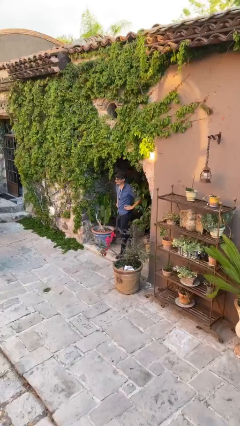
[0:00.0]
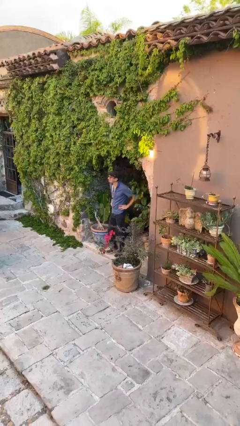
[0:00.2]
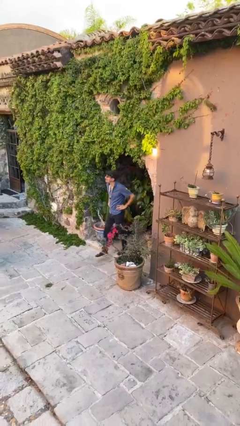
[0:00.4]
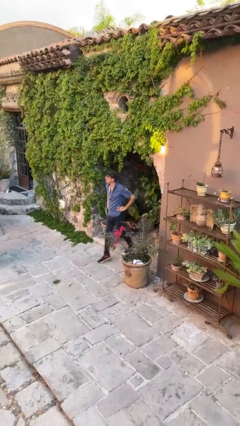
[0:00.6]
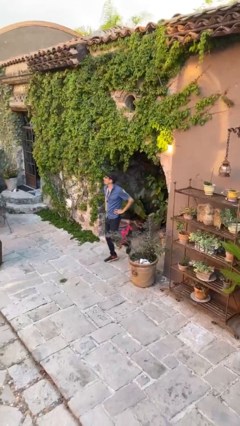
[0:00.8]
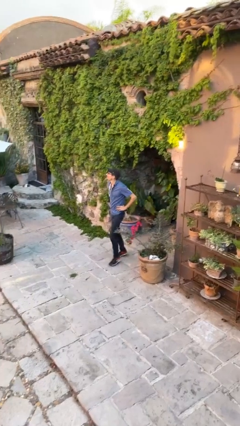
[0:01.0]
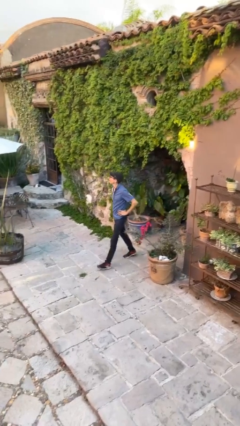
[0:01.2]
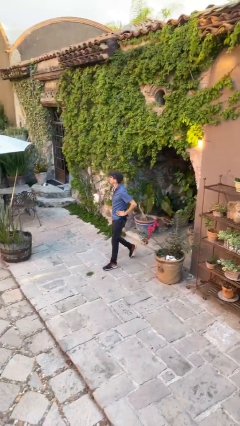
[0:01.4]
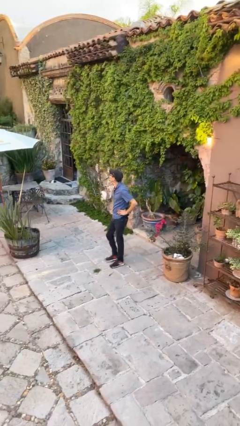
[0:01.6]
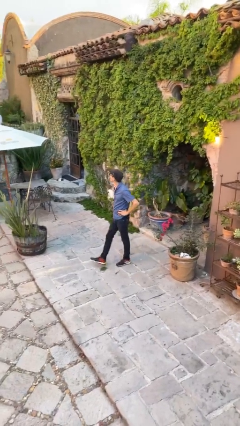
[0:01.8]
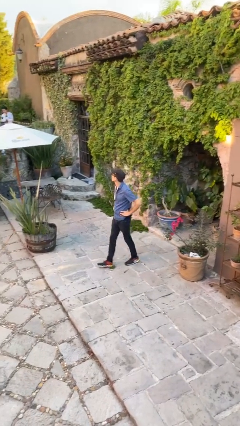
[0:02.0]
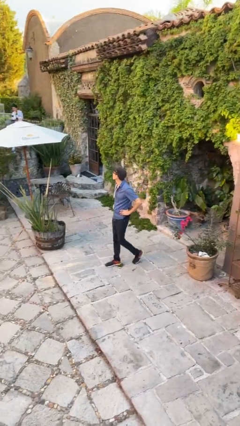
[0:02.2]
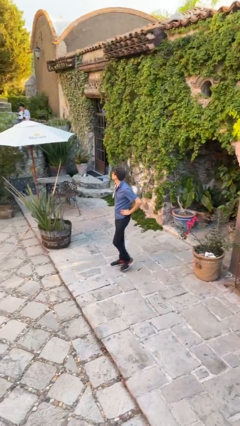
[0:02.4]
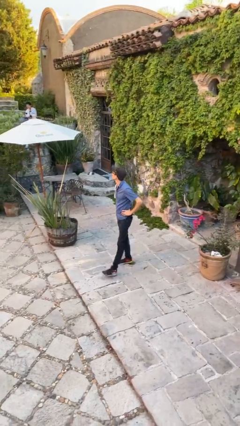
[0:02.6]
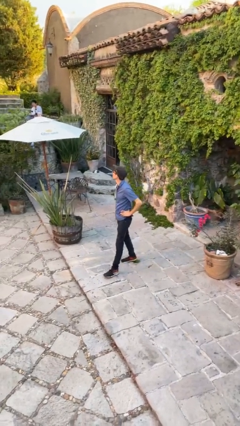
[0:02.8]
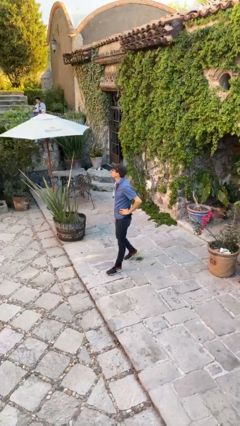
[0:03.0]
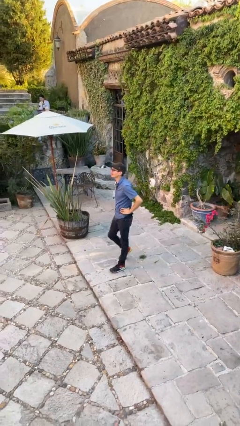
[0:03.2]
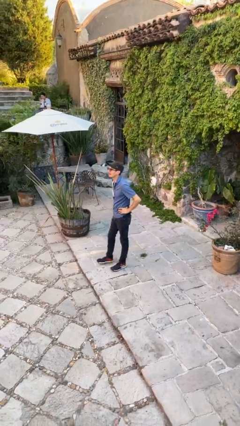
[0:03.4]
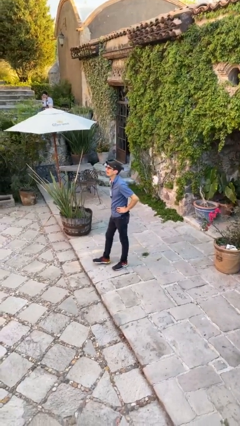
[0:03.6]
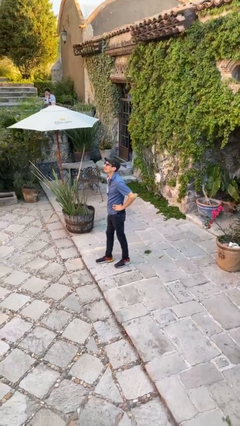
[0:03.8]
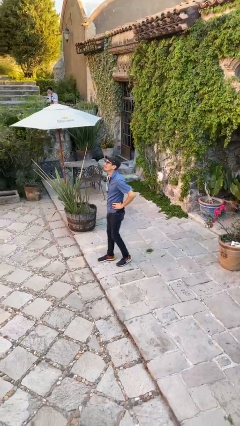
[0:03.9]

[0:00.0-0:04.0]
person enters scene through structure

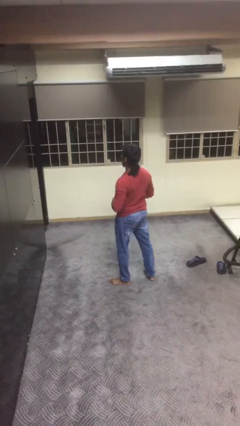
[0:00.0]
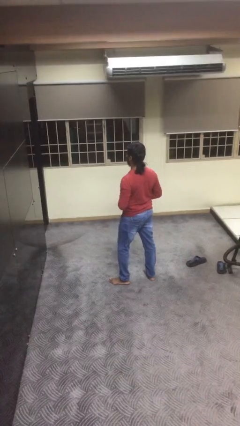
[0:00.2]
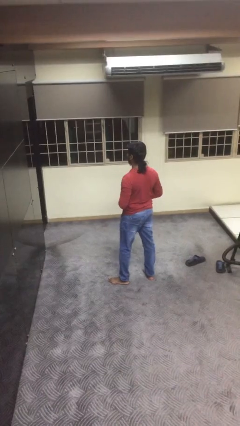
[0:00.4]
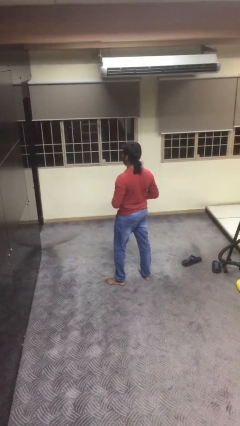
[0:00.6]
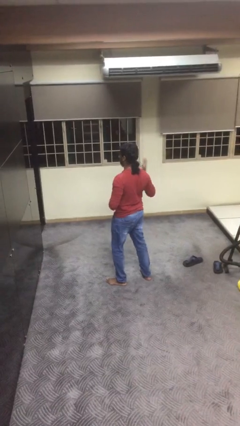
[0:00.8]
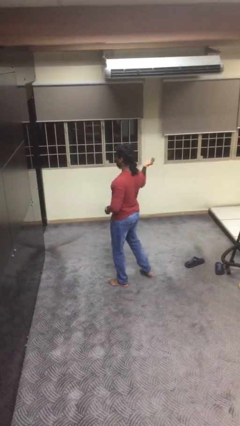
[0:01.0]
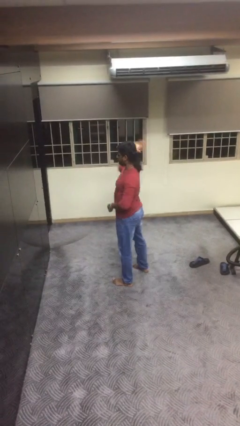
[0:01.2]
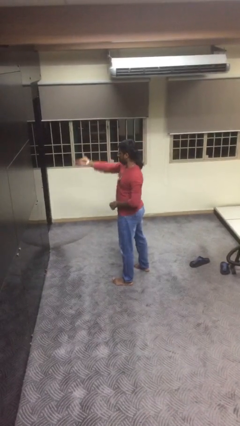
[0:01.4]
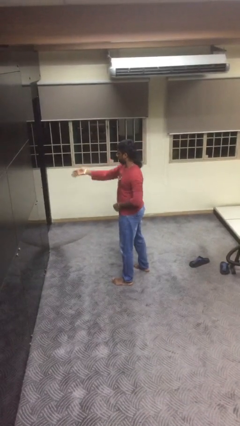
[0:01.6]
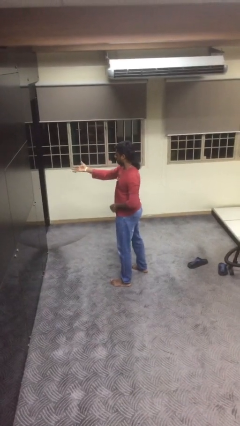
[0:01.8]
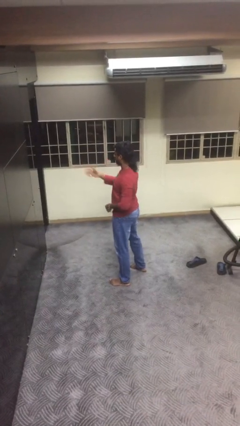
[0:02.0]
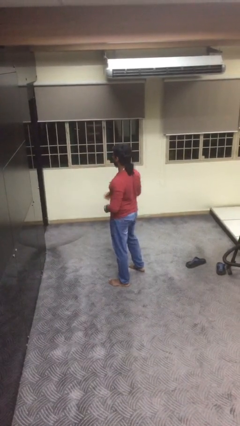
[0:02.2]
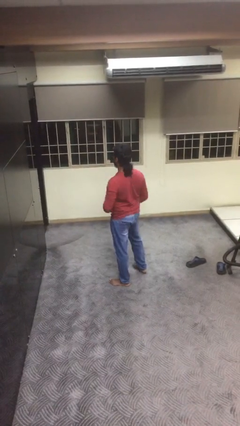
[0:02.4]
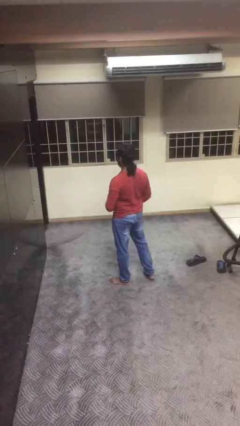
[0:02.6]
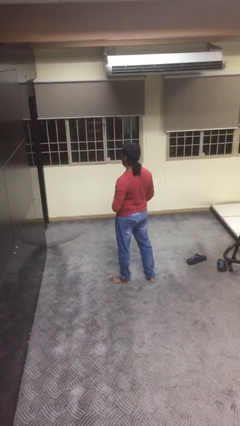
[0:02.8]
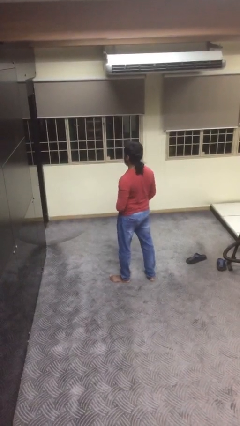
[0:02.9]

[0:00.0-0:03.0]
person karate chop

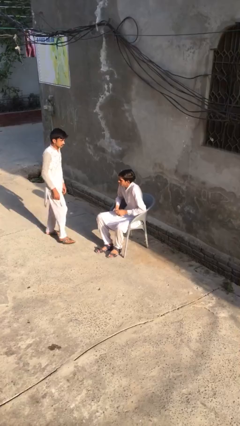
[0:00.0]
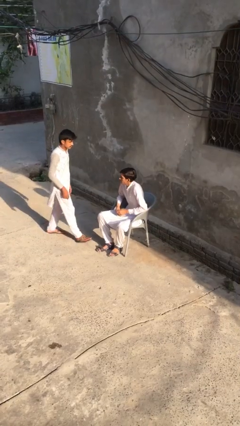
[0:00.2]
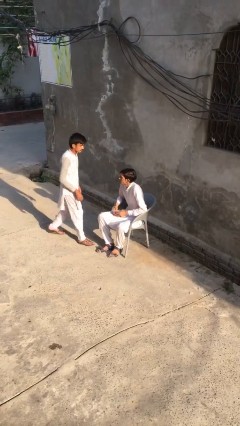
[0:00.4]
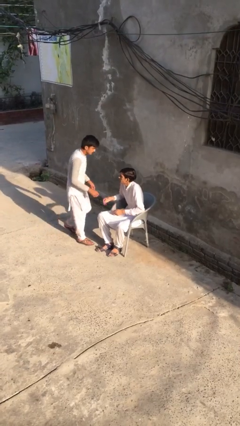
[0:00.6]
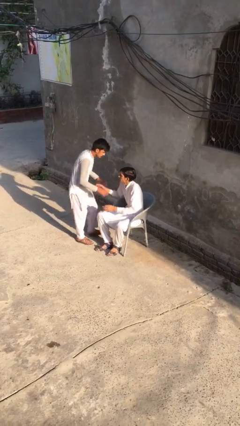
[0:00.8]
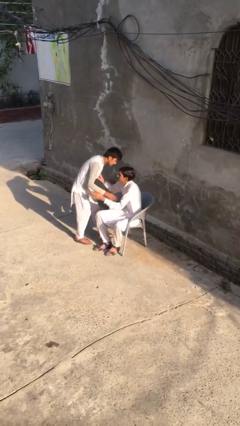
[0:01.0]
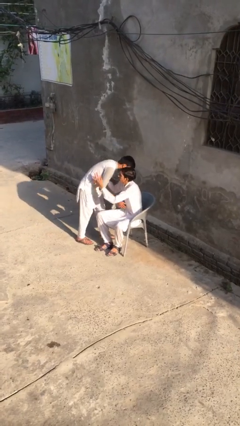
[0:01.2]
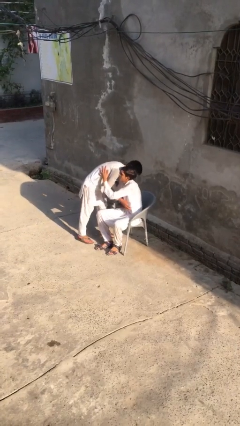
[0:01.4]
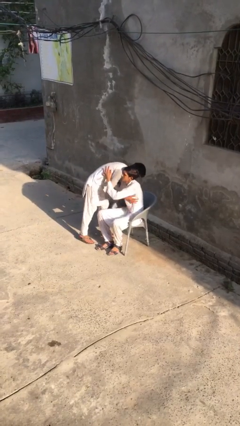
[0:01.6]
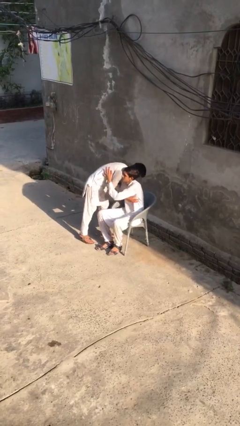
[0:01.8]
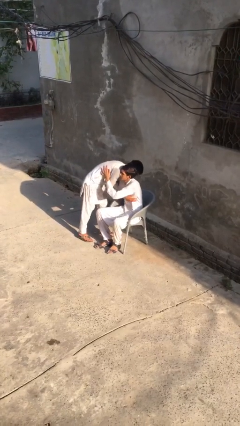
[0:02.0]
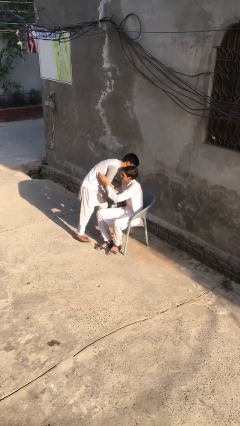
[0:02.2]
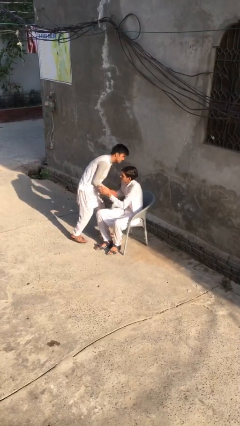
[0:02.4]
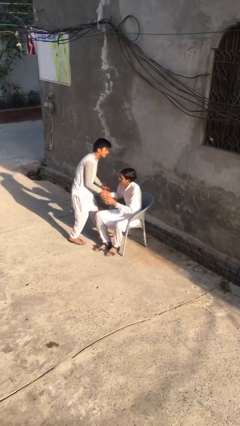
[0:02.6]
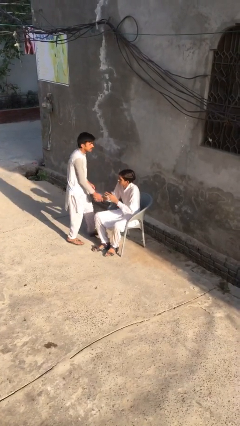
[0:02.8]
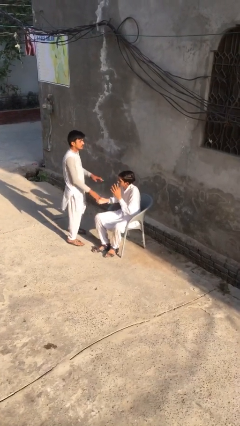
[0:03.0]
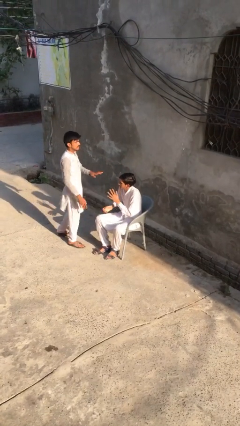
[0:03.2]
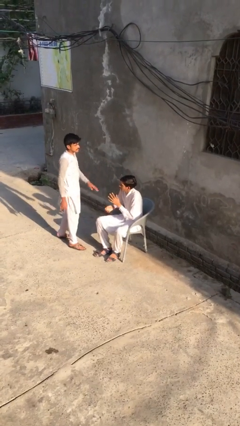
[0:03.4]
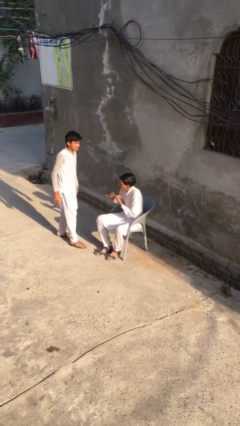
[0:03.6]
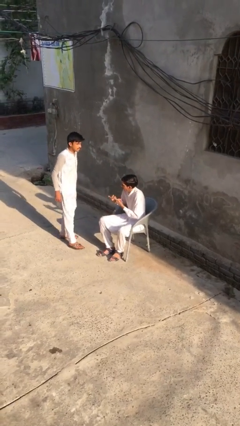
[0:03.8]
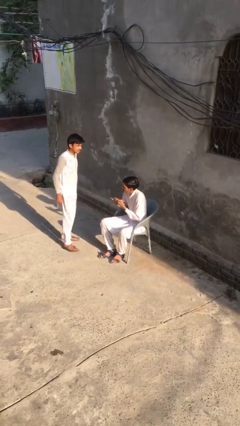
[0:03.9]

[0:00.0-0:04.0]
person embraces person

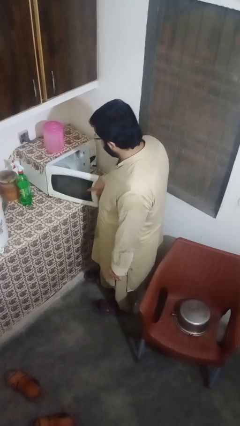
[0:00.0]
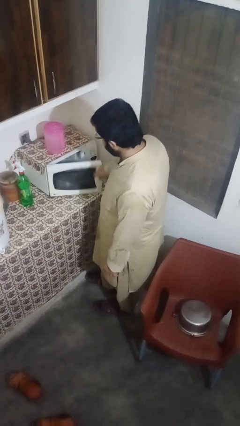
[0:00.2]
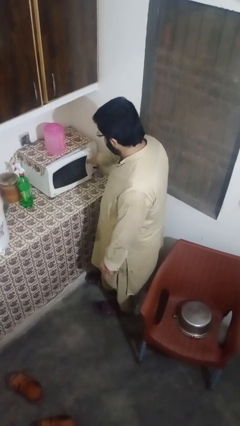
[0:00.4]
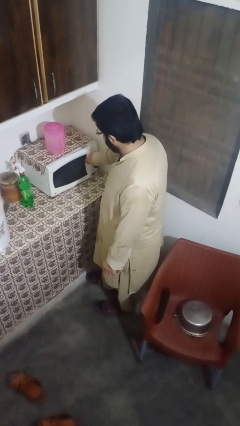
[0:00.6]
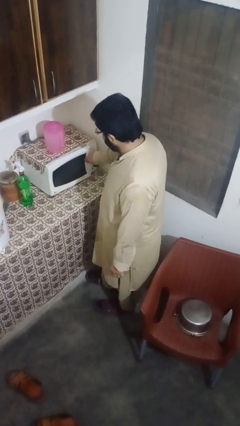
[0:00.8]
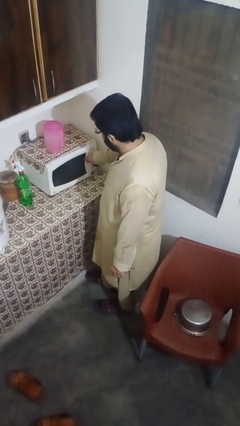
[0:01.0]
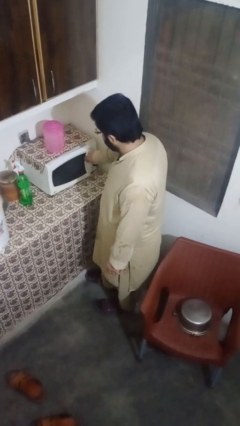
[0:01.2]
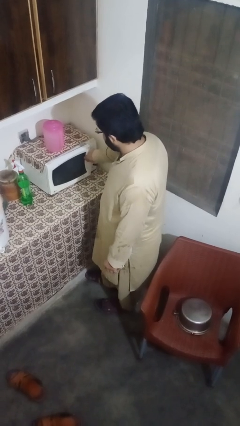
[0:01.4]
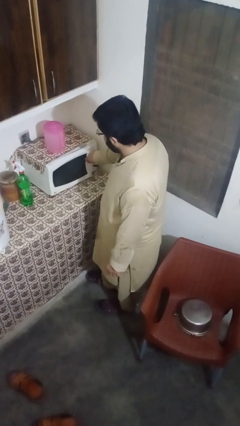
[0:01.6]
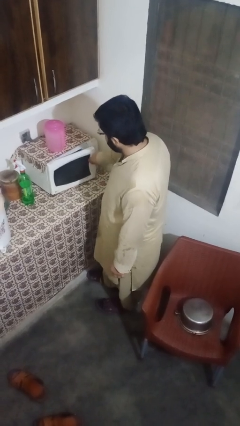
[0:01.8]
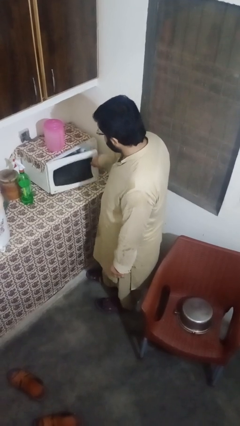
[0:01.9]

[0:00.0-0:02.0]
person closes microwave

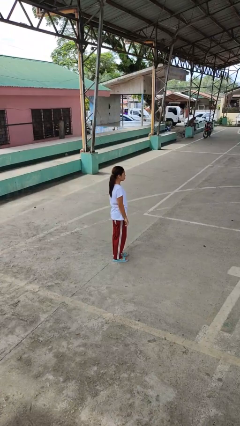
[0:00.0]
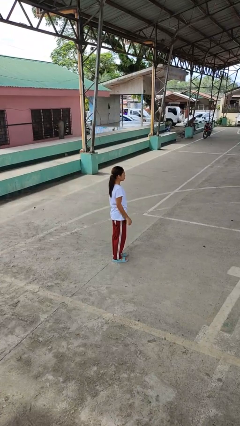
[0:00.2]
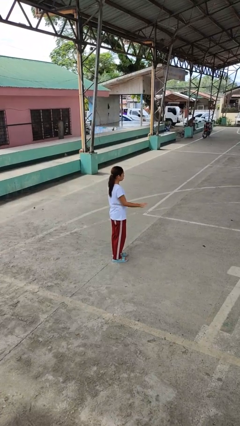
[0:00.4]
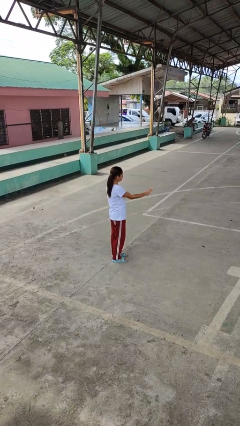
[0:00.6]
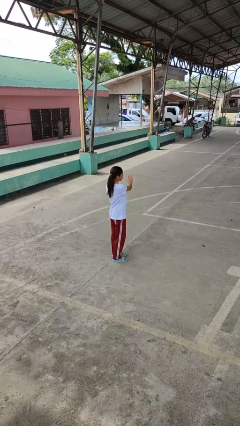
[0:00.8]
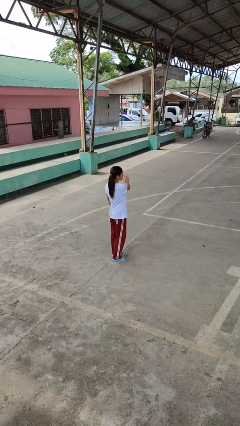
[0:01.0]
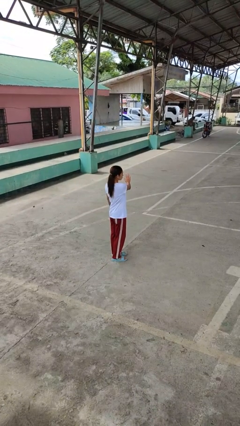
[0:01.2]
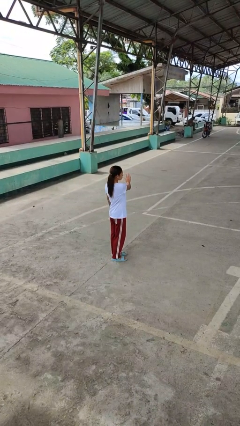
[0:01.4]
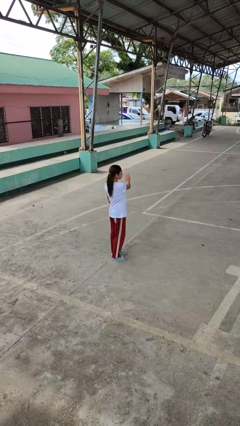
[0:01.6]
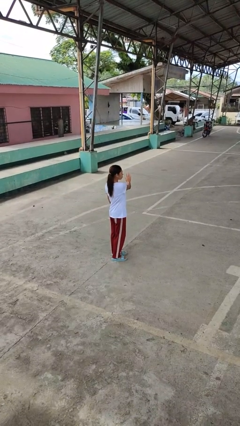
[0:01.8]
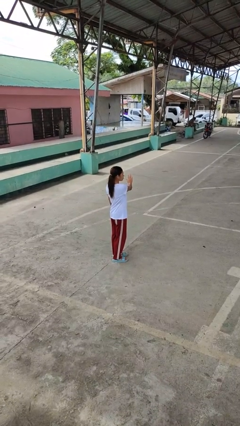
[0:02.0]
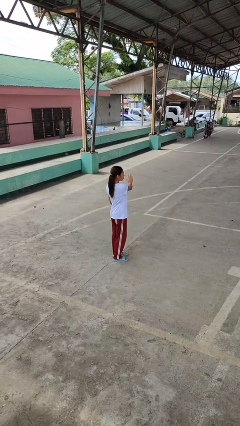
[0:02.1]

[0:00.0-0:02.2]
person gestures swipe left

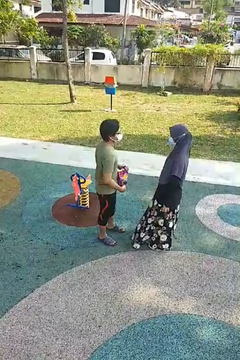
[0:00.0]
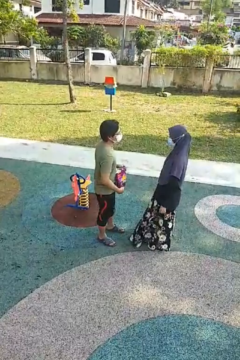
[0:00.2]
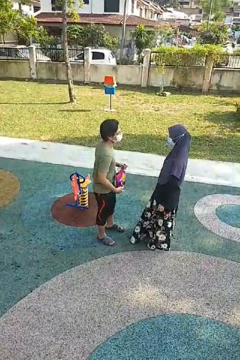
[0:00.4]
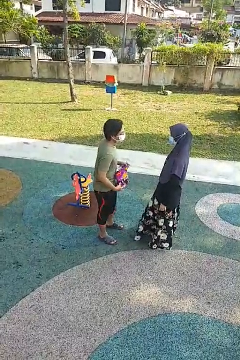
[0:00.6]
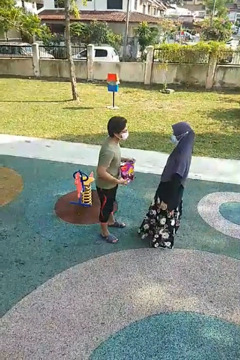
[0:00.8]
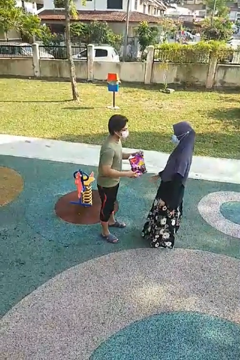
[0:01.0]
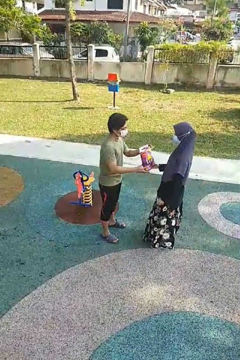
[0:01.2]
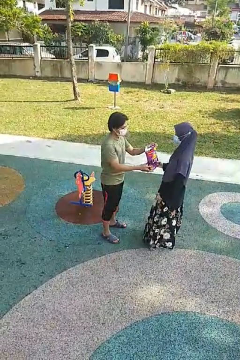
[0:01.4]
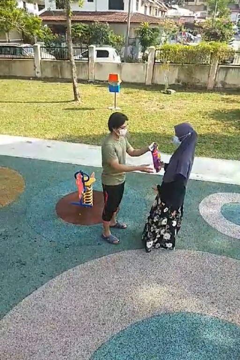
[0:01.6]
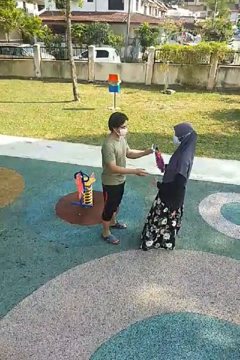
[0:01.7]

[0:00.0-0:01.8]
person transfers object to person

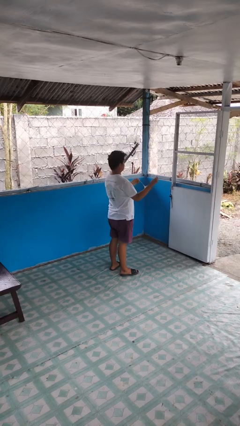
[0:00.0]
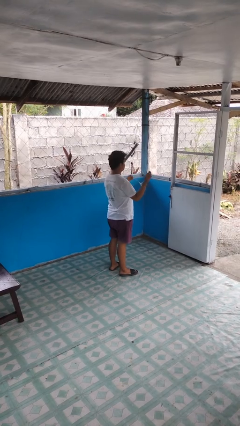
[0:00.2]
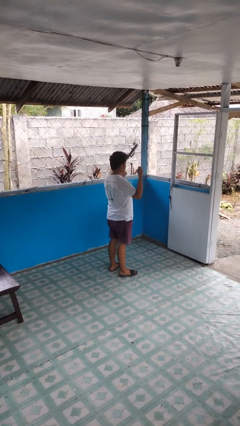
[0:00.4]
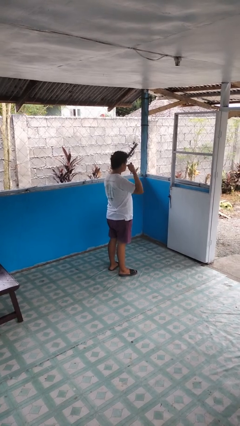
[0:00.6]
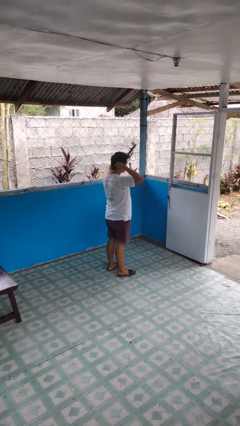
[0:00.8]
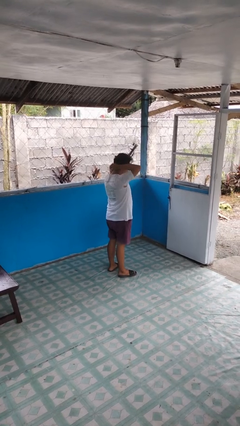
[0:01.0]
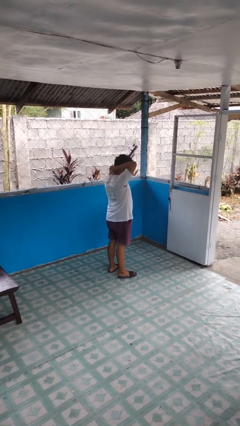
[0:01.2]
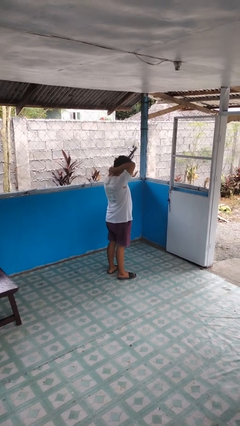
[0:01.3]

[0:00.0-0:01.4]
person puts on necklace
